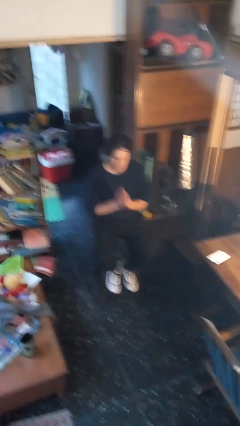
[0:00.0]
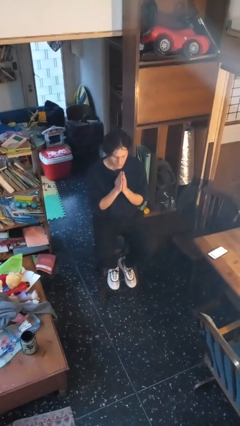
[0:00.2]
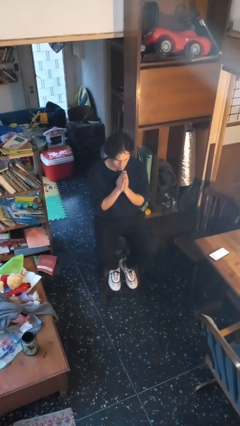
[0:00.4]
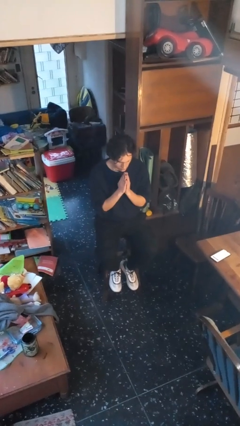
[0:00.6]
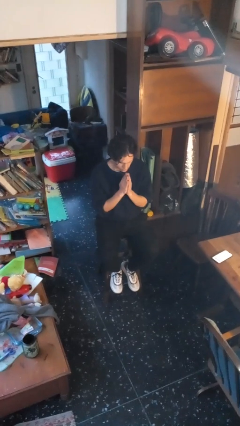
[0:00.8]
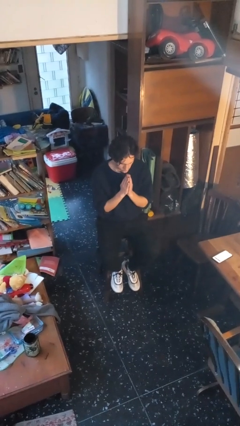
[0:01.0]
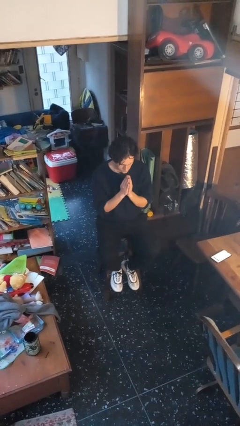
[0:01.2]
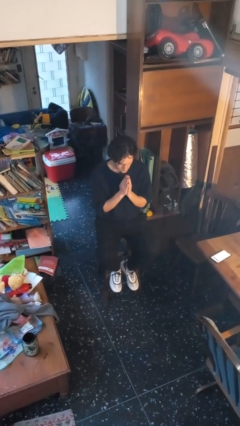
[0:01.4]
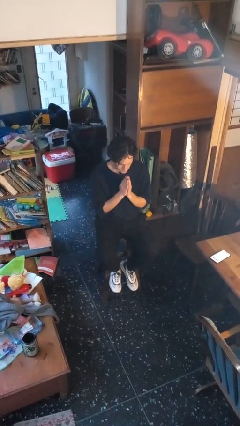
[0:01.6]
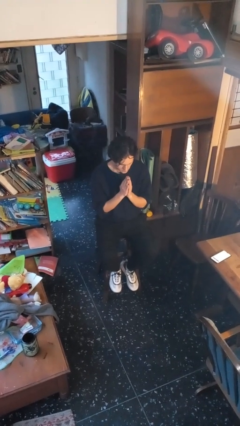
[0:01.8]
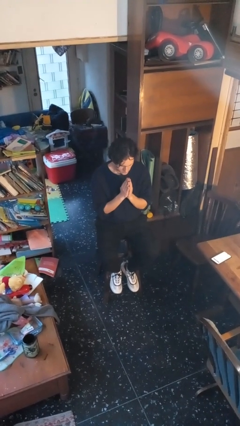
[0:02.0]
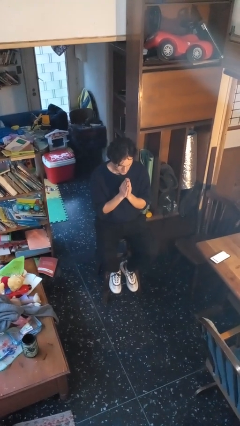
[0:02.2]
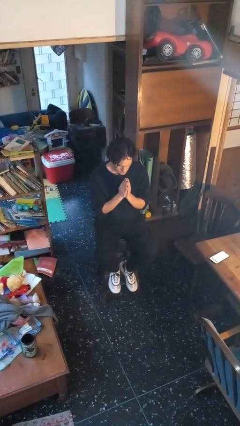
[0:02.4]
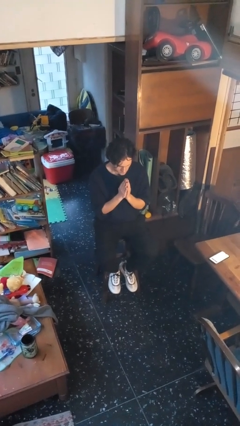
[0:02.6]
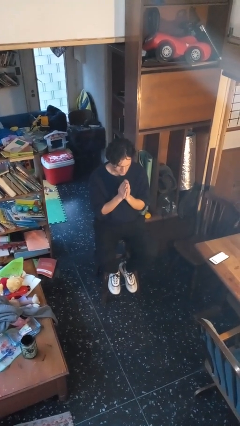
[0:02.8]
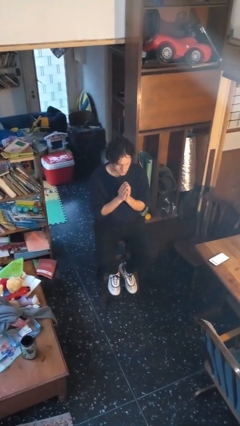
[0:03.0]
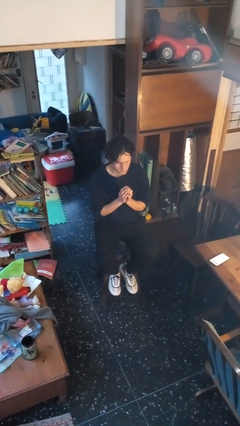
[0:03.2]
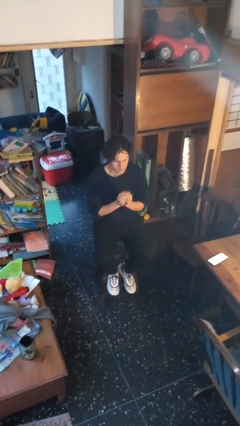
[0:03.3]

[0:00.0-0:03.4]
person prays

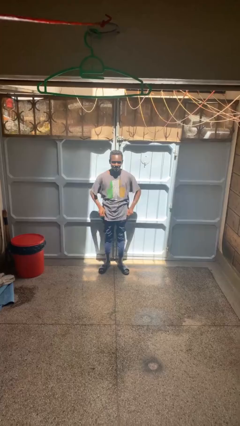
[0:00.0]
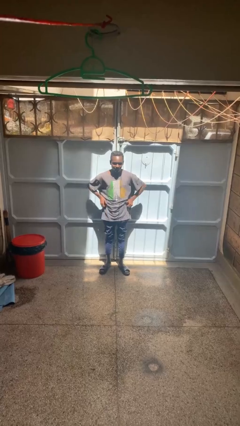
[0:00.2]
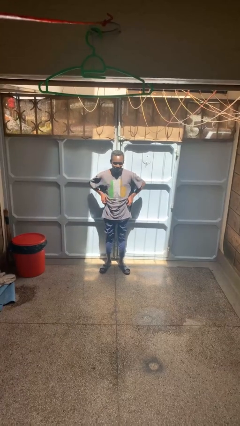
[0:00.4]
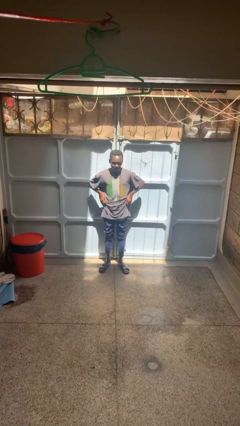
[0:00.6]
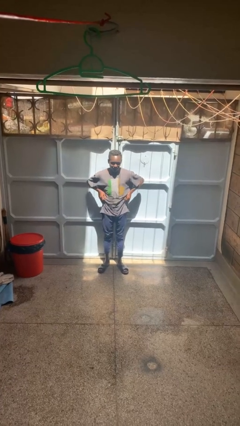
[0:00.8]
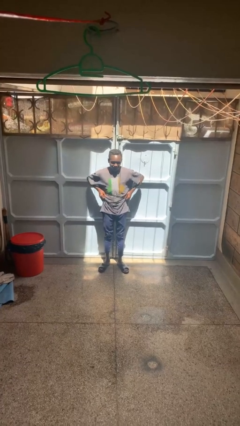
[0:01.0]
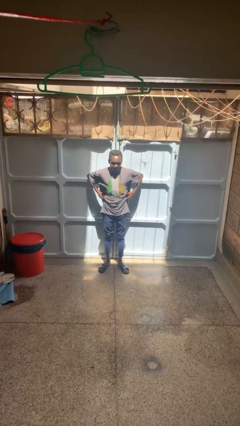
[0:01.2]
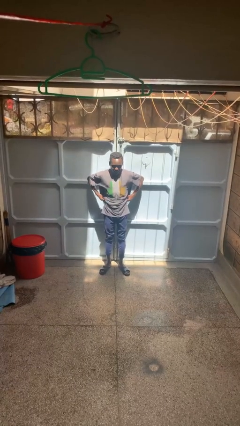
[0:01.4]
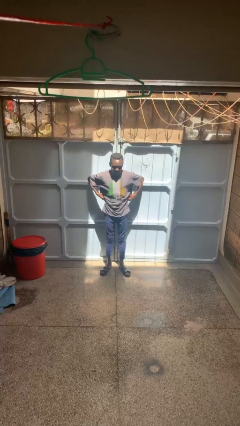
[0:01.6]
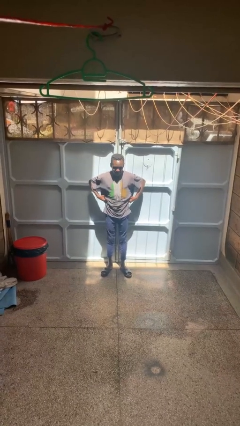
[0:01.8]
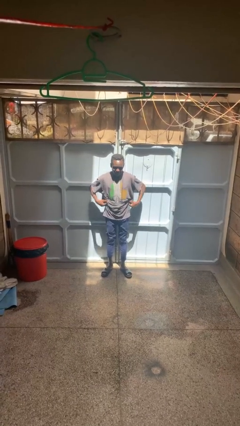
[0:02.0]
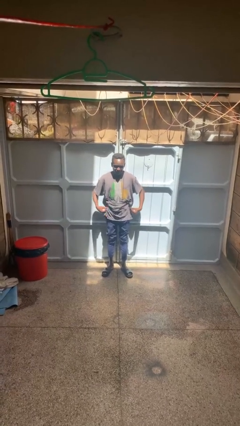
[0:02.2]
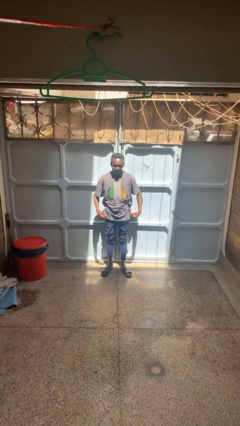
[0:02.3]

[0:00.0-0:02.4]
person hikes up pants

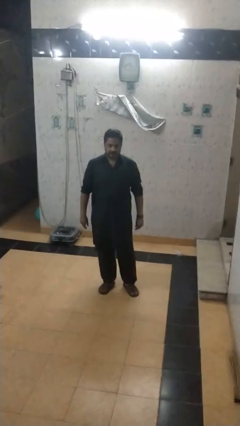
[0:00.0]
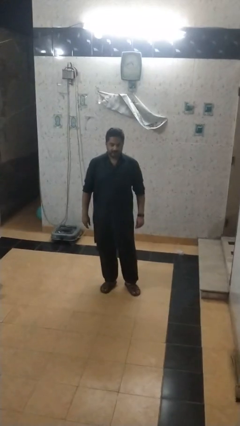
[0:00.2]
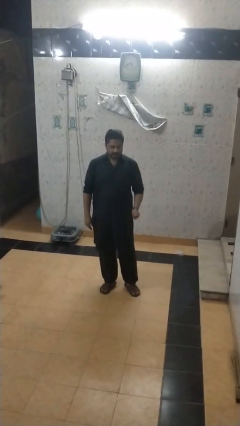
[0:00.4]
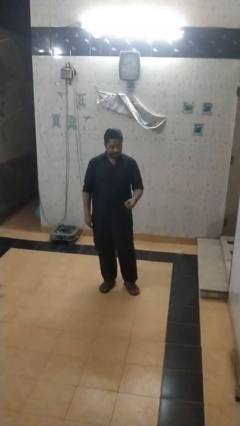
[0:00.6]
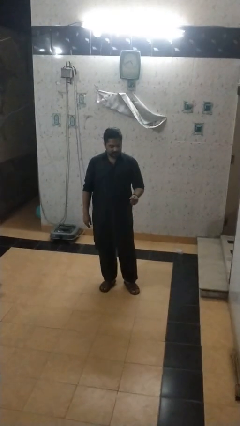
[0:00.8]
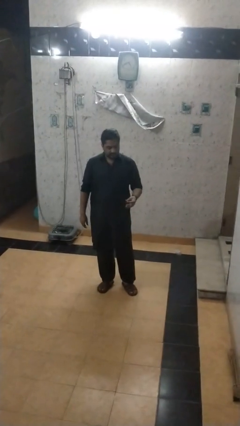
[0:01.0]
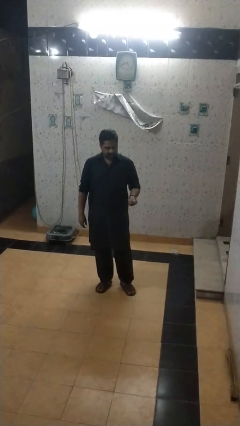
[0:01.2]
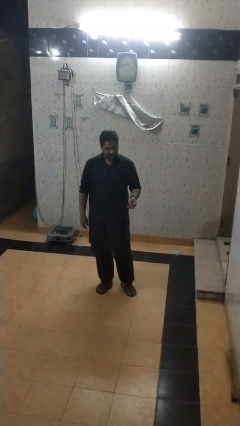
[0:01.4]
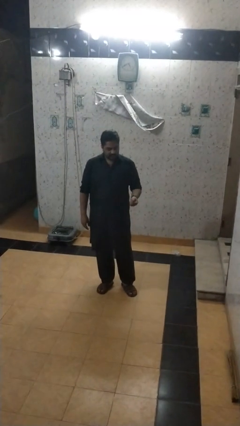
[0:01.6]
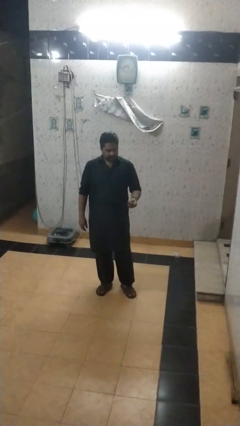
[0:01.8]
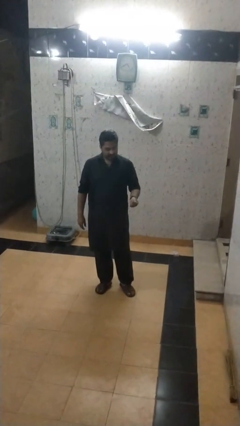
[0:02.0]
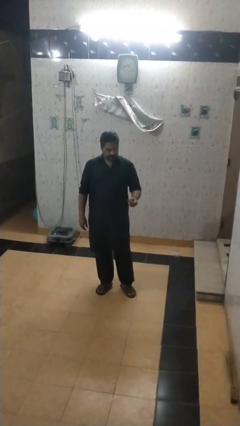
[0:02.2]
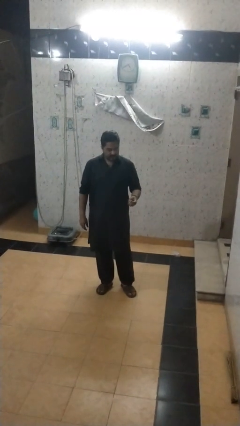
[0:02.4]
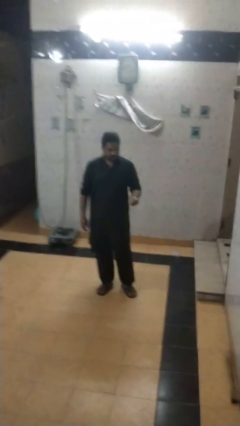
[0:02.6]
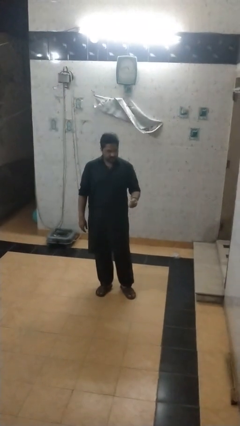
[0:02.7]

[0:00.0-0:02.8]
person snaps fingers

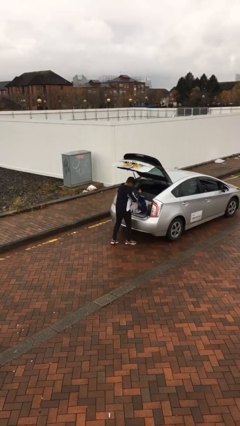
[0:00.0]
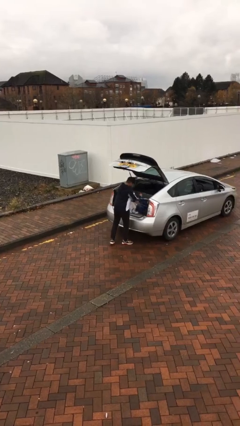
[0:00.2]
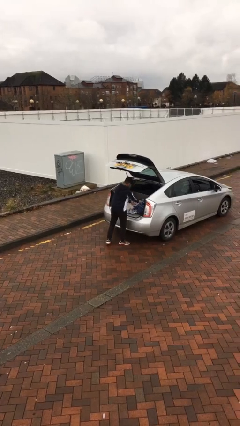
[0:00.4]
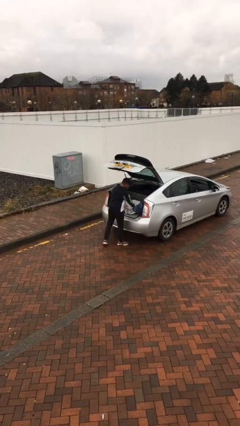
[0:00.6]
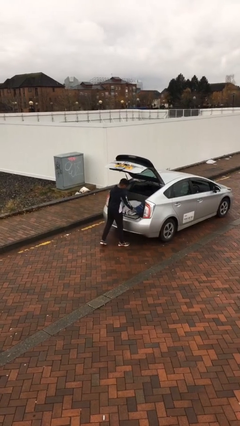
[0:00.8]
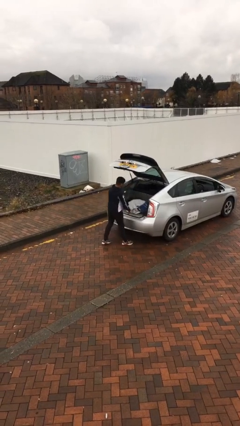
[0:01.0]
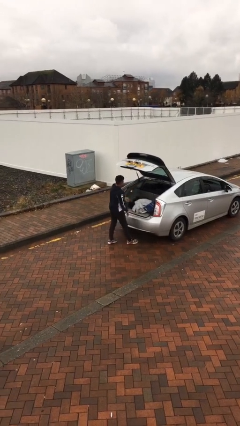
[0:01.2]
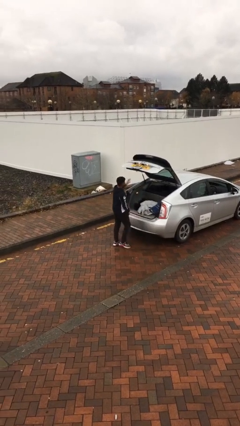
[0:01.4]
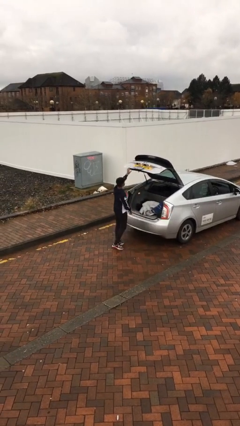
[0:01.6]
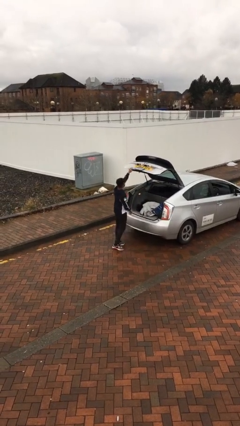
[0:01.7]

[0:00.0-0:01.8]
person loads car

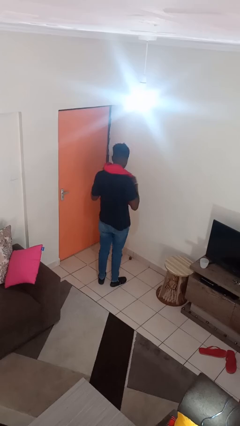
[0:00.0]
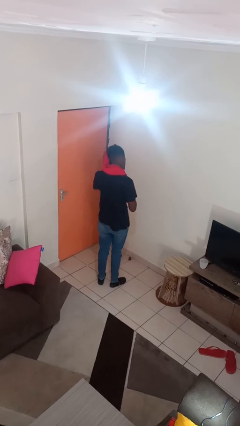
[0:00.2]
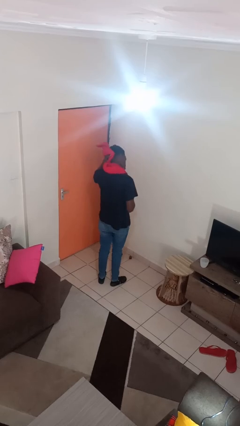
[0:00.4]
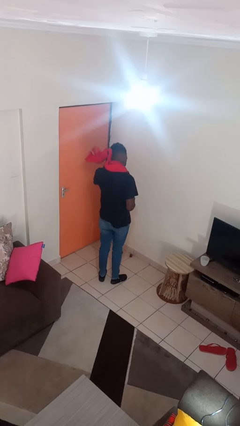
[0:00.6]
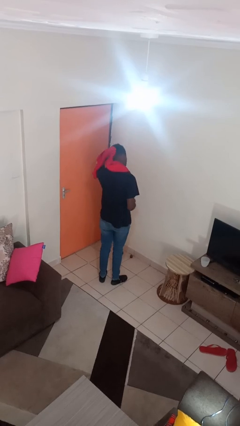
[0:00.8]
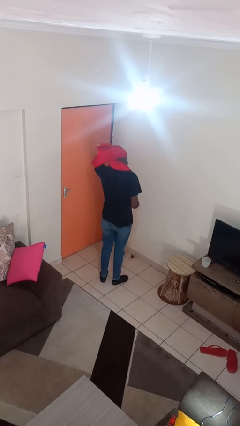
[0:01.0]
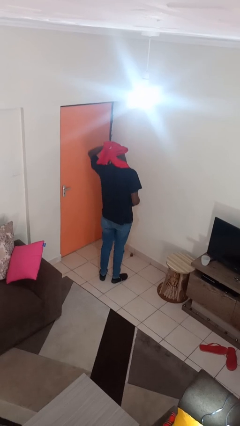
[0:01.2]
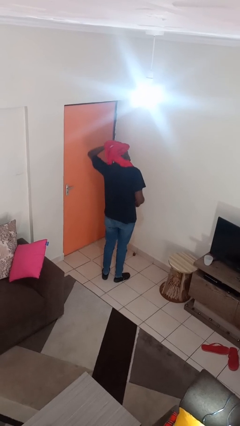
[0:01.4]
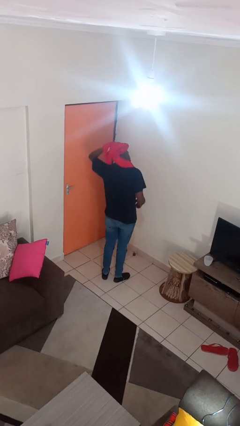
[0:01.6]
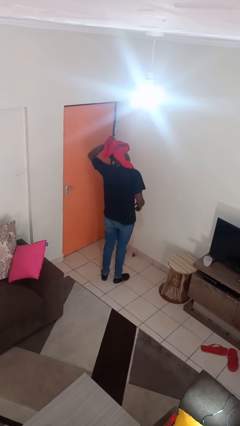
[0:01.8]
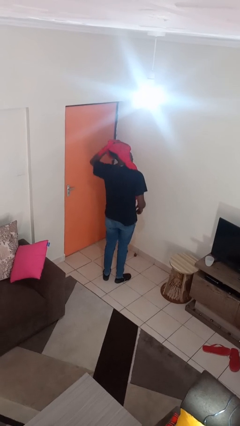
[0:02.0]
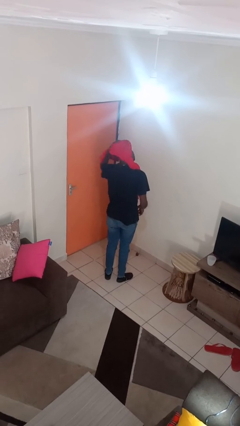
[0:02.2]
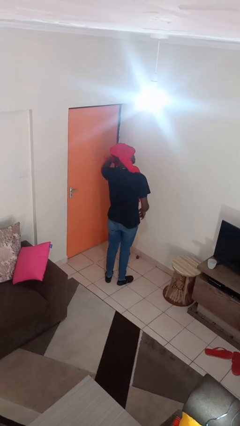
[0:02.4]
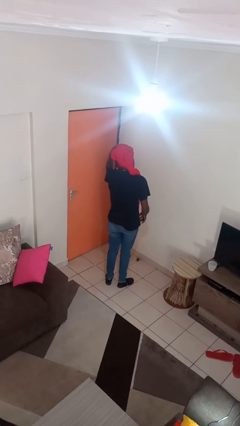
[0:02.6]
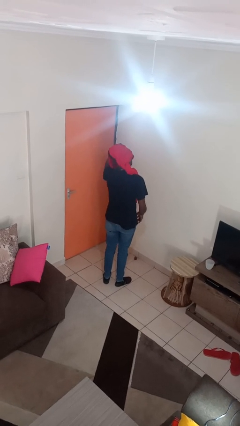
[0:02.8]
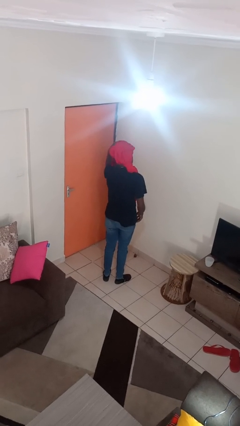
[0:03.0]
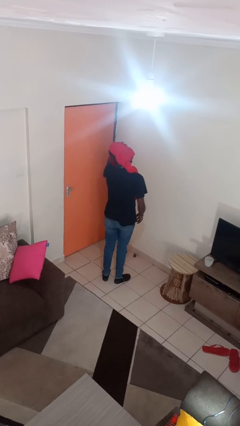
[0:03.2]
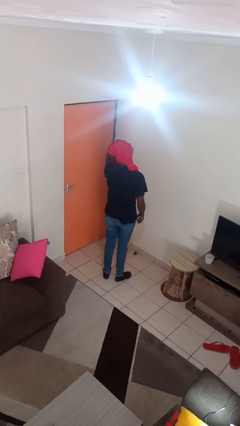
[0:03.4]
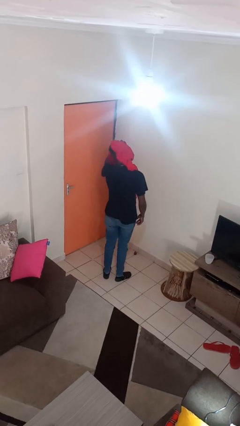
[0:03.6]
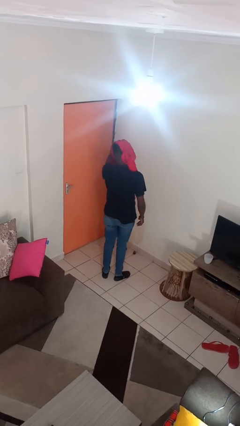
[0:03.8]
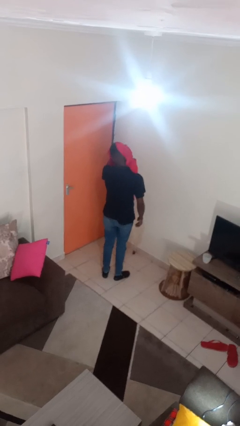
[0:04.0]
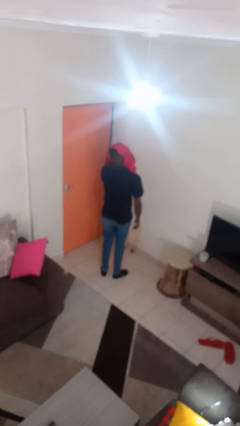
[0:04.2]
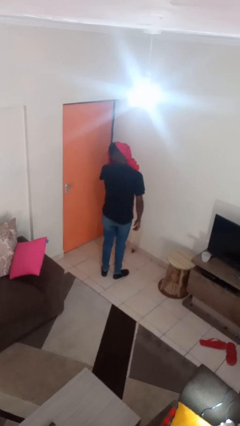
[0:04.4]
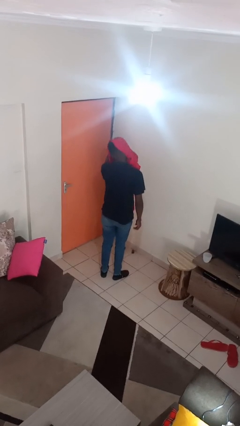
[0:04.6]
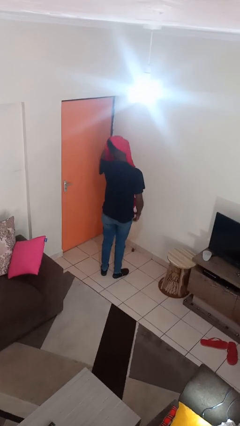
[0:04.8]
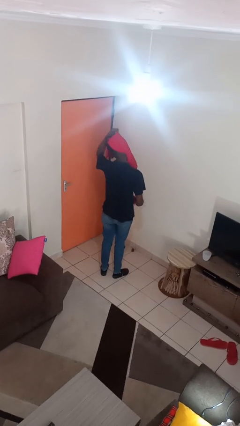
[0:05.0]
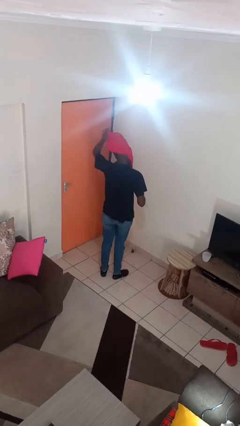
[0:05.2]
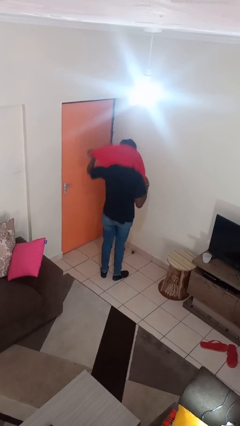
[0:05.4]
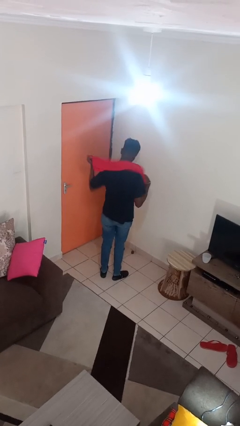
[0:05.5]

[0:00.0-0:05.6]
person dries hair with towel

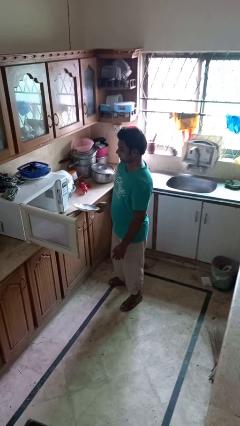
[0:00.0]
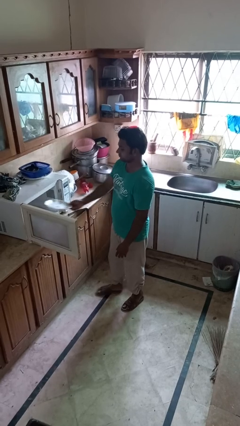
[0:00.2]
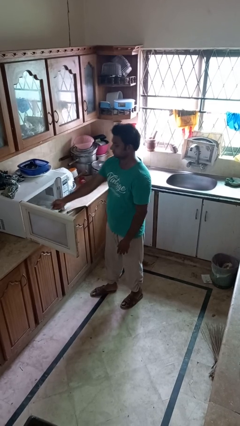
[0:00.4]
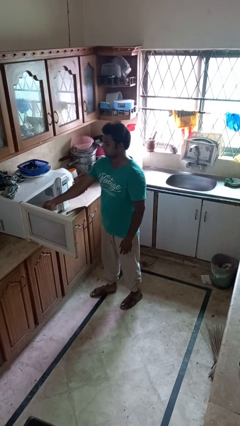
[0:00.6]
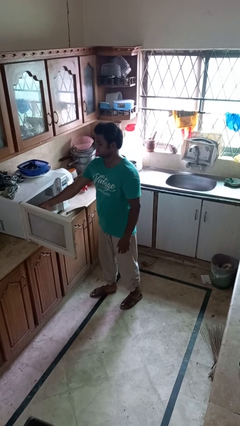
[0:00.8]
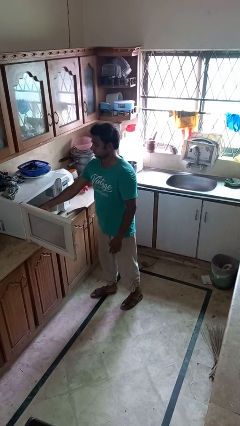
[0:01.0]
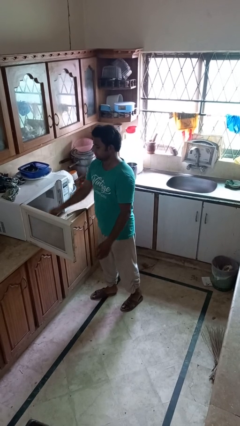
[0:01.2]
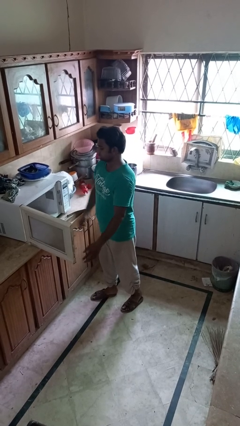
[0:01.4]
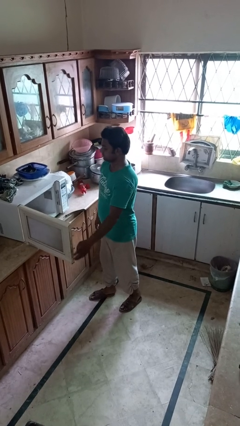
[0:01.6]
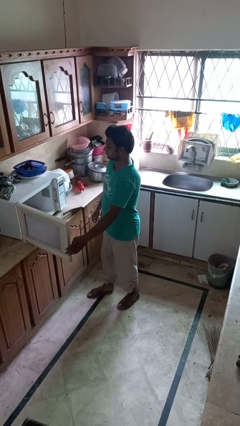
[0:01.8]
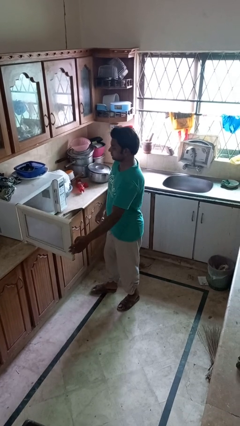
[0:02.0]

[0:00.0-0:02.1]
person puts object into microwave
